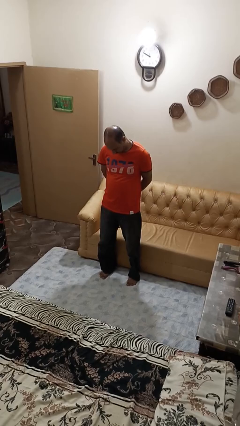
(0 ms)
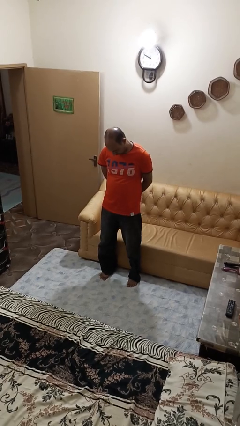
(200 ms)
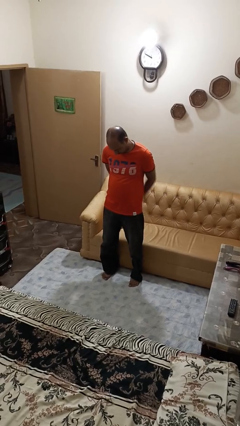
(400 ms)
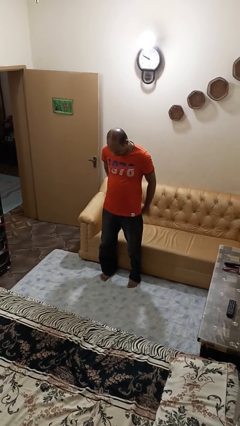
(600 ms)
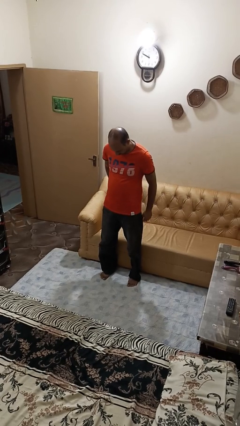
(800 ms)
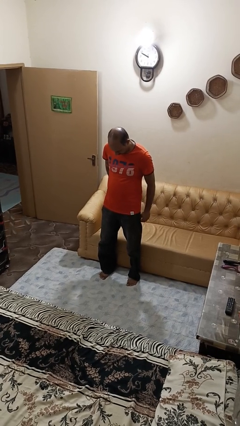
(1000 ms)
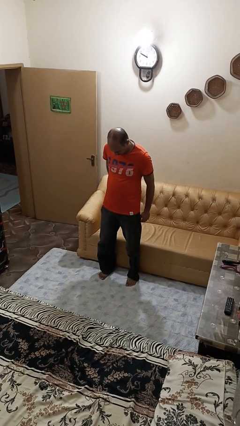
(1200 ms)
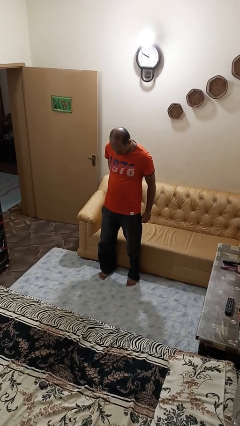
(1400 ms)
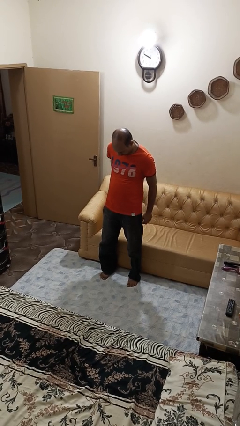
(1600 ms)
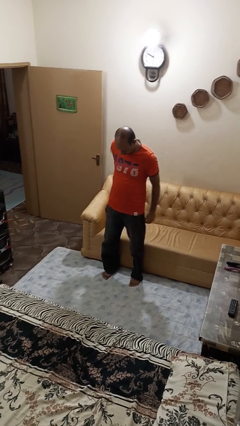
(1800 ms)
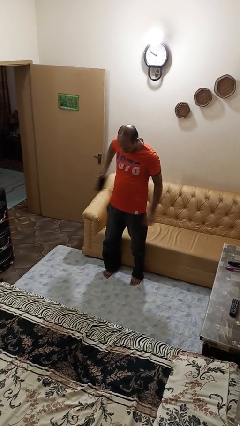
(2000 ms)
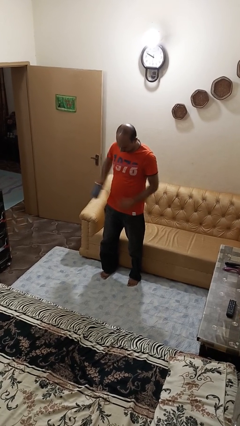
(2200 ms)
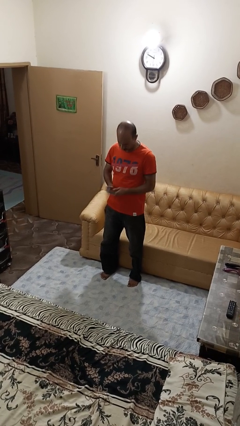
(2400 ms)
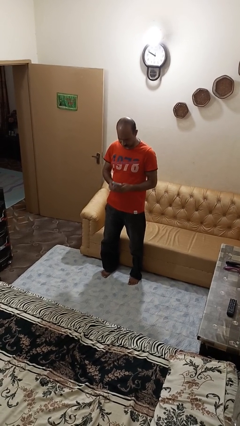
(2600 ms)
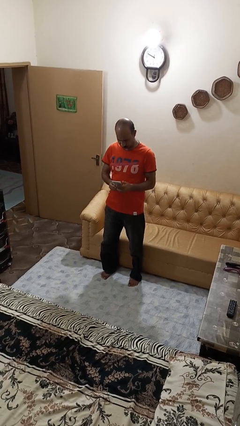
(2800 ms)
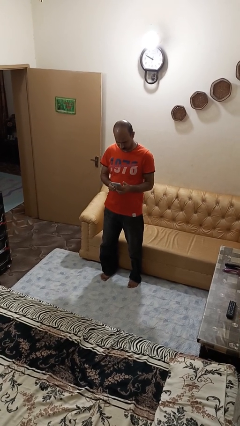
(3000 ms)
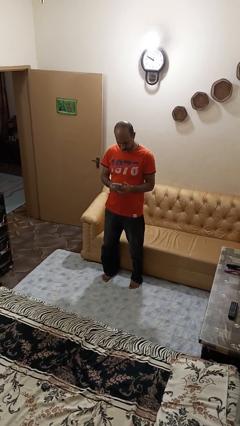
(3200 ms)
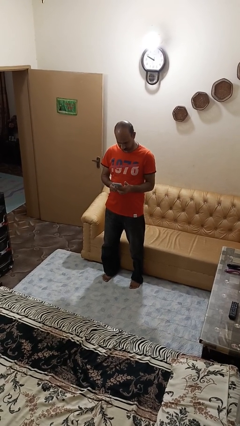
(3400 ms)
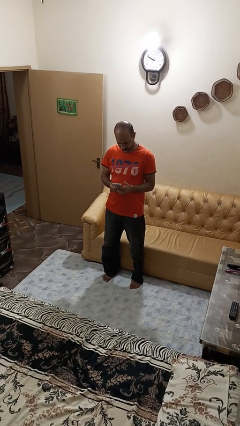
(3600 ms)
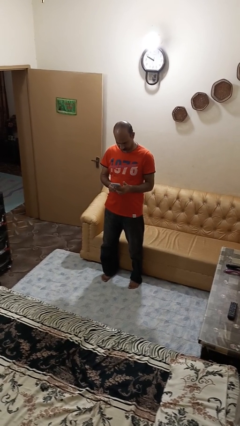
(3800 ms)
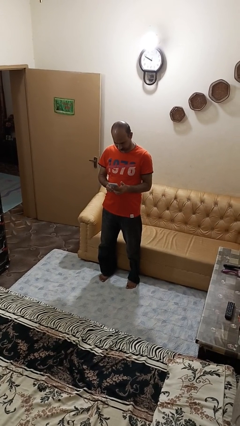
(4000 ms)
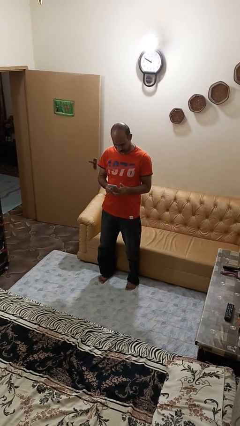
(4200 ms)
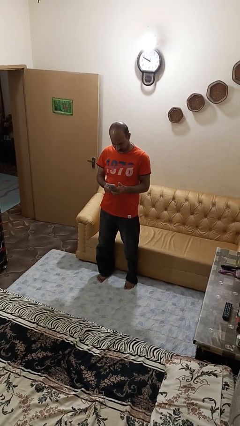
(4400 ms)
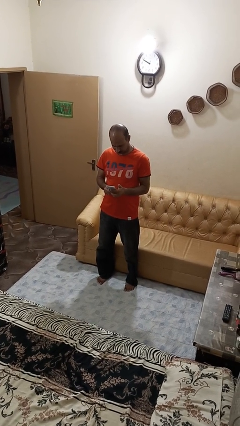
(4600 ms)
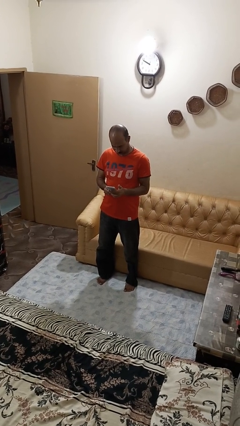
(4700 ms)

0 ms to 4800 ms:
person takes phone from pocket

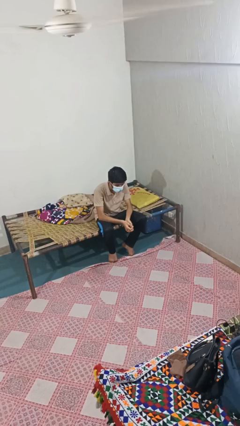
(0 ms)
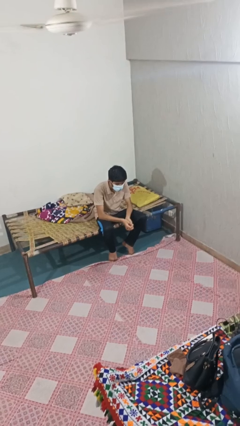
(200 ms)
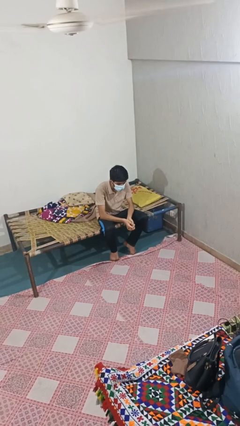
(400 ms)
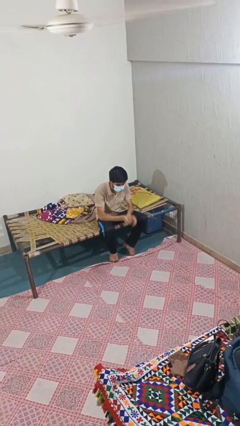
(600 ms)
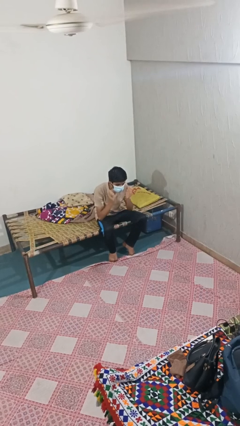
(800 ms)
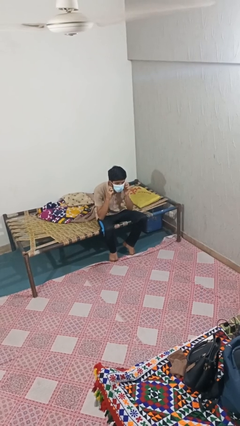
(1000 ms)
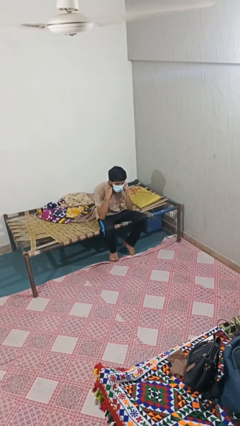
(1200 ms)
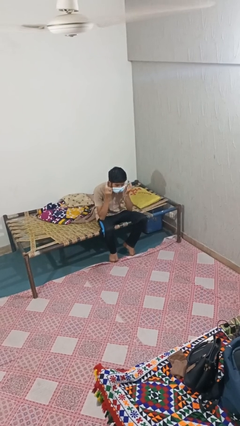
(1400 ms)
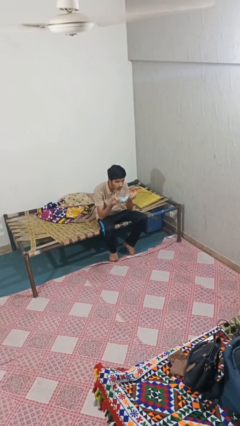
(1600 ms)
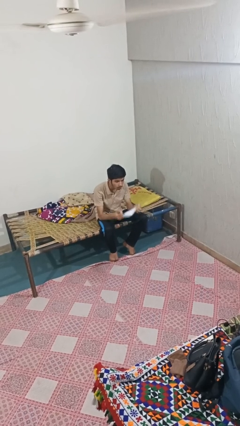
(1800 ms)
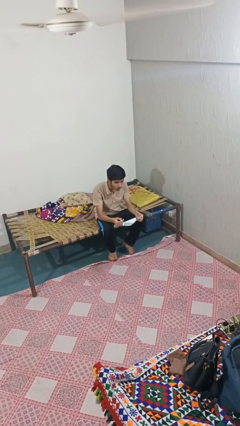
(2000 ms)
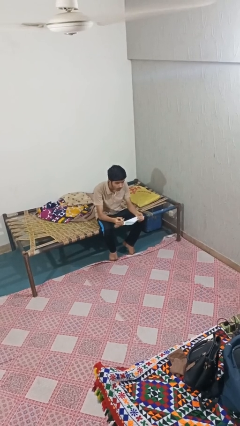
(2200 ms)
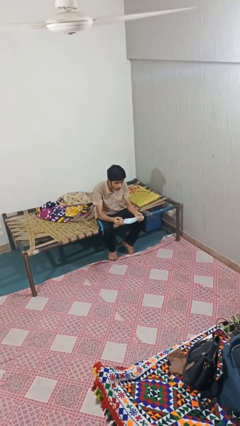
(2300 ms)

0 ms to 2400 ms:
person takes off facemask

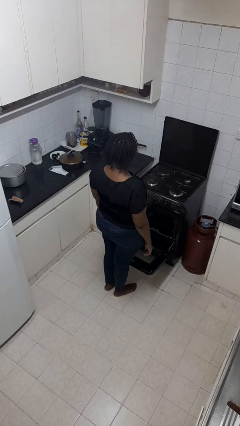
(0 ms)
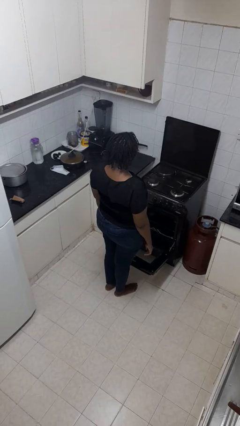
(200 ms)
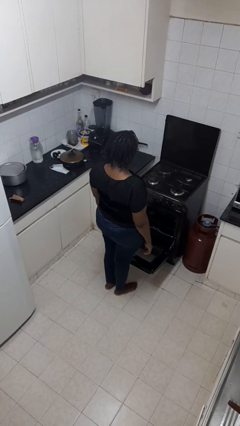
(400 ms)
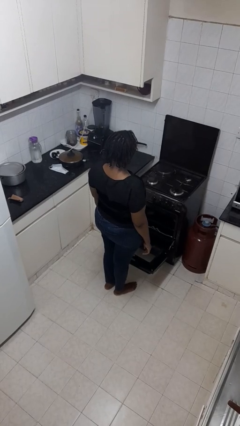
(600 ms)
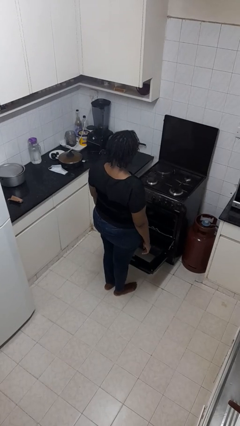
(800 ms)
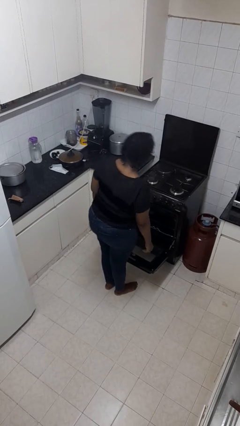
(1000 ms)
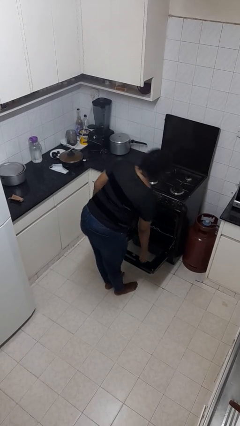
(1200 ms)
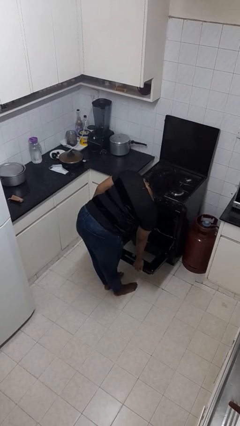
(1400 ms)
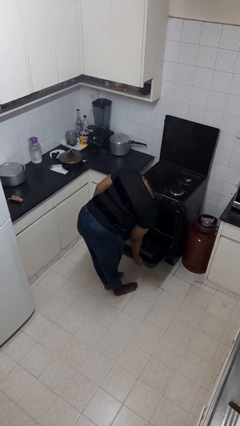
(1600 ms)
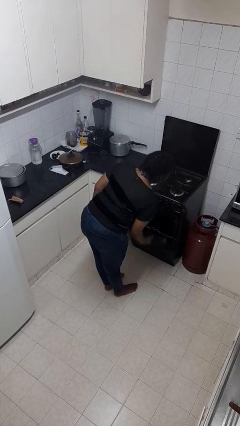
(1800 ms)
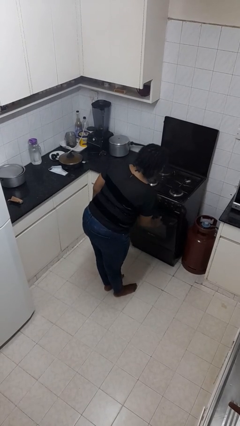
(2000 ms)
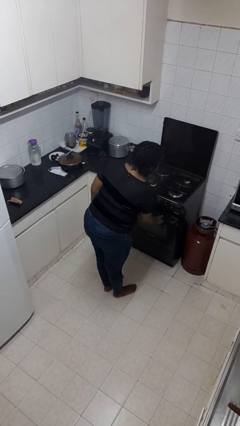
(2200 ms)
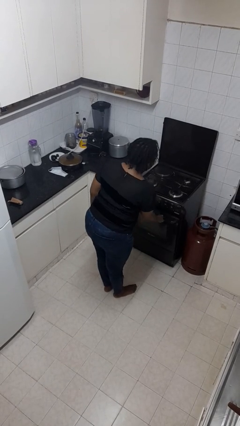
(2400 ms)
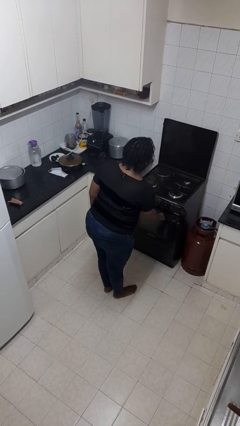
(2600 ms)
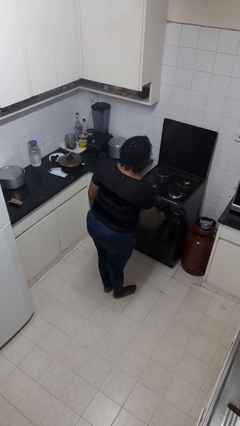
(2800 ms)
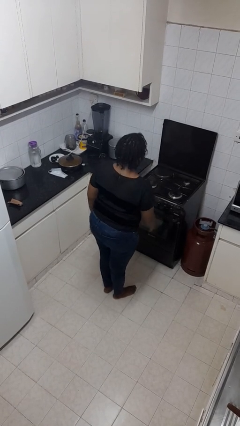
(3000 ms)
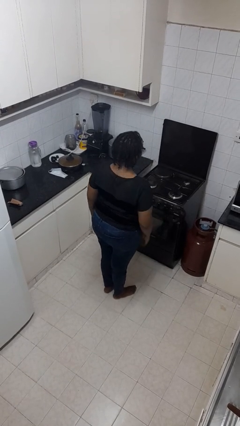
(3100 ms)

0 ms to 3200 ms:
person closes oven door

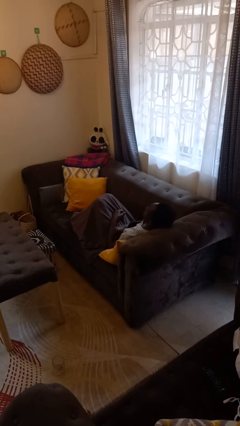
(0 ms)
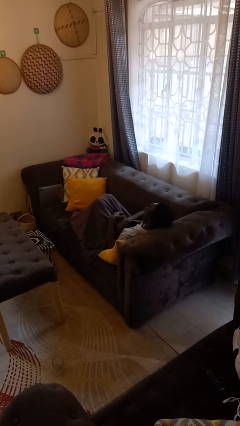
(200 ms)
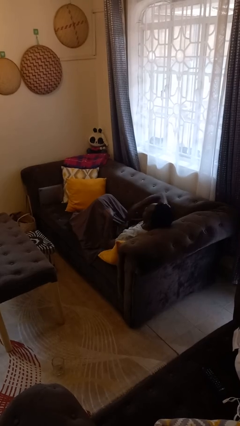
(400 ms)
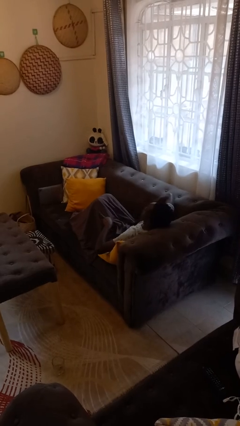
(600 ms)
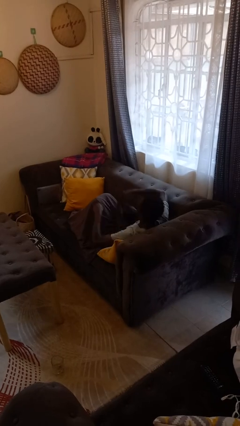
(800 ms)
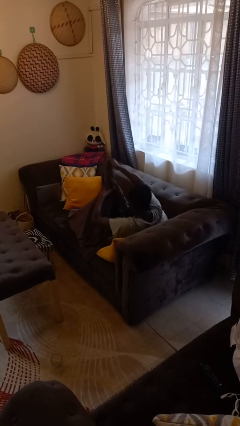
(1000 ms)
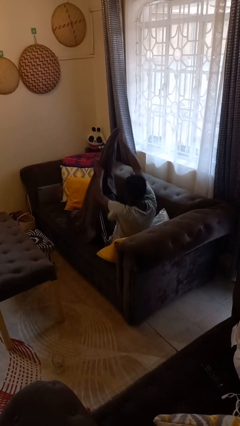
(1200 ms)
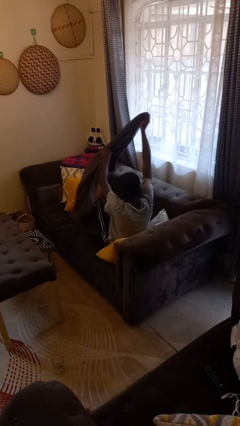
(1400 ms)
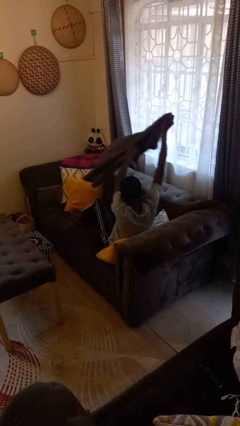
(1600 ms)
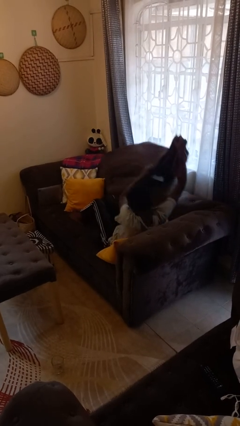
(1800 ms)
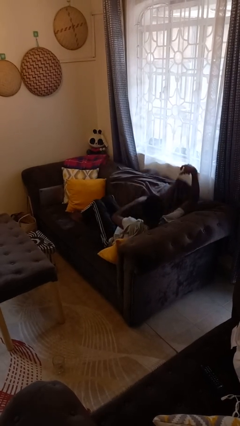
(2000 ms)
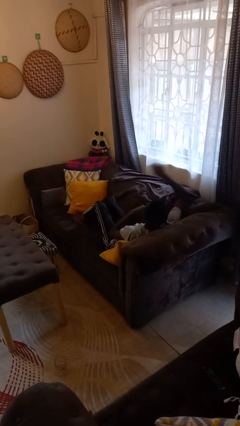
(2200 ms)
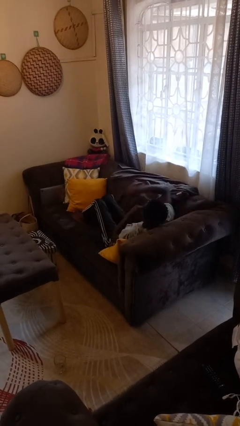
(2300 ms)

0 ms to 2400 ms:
person uncovers with blanket

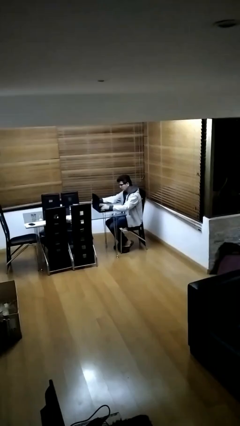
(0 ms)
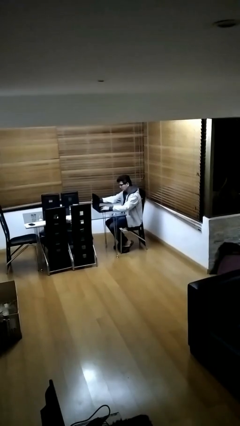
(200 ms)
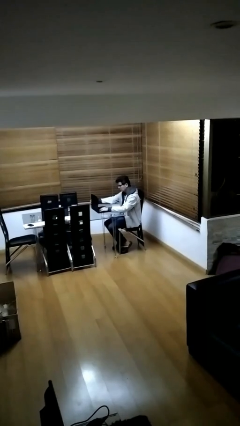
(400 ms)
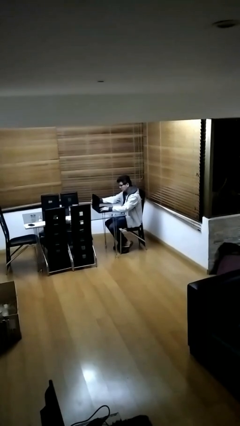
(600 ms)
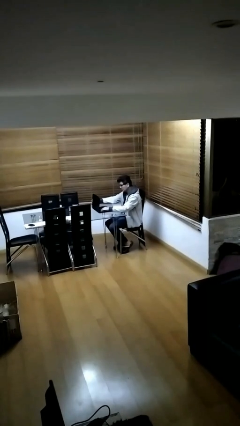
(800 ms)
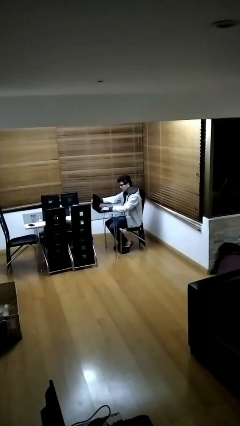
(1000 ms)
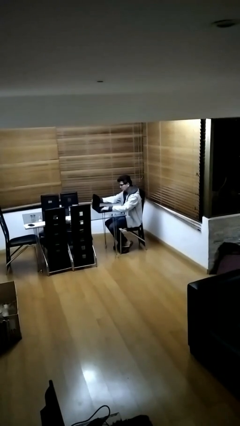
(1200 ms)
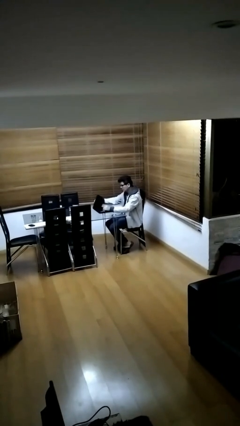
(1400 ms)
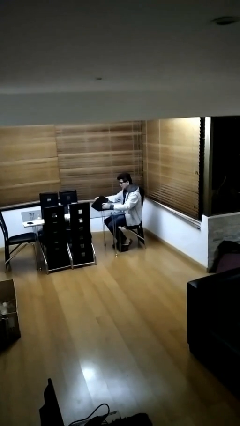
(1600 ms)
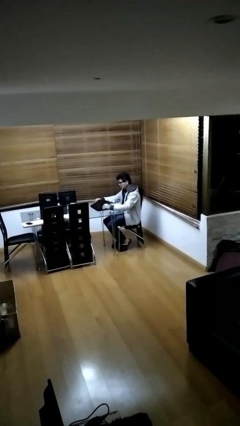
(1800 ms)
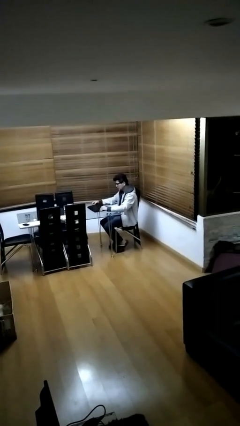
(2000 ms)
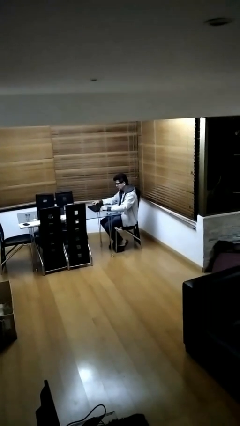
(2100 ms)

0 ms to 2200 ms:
person interacts with laptop

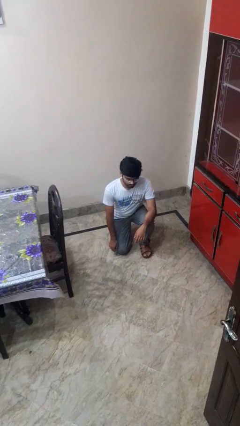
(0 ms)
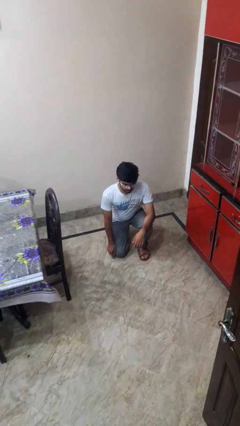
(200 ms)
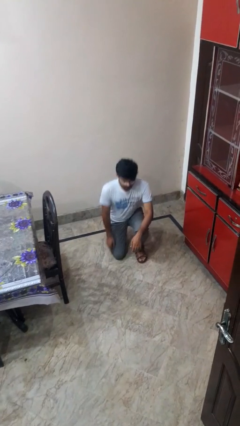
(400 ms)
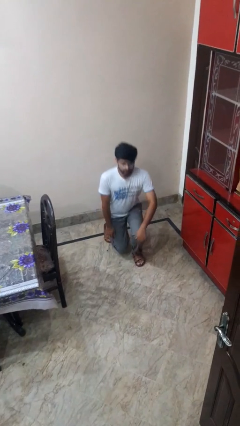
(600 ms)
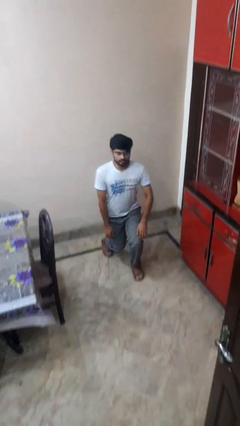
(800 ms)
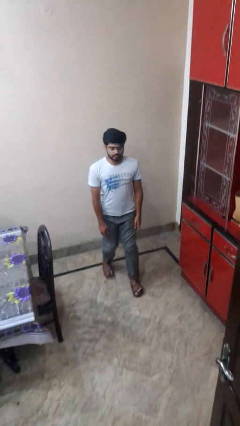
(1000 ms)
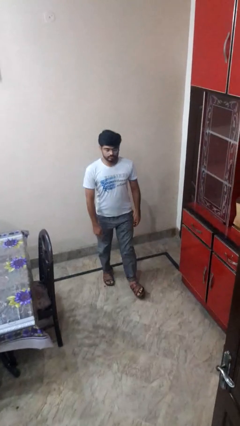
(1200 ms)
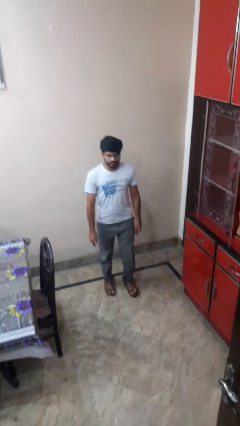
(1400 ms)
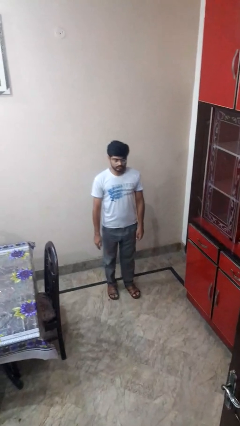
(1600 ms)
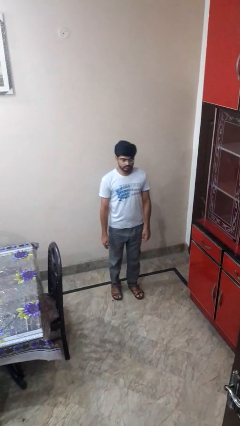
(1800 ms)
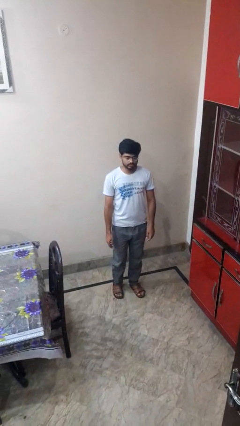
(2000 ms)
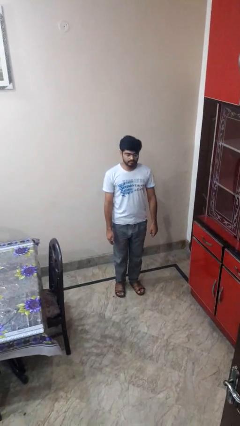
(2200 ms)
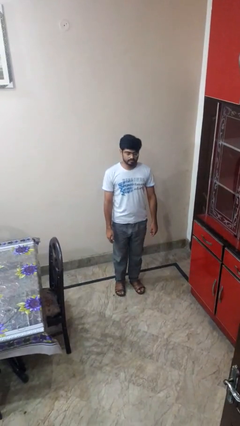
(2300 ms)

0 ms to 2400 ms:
person stands up from floor
